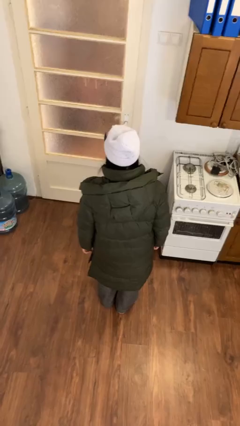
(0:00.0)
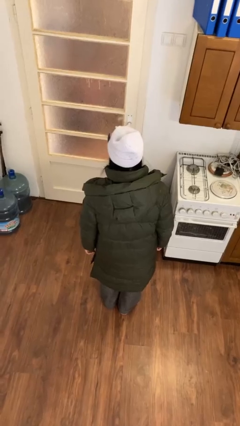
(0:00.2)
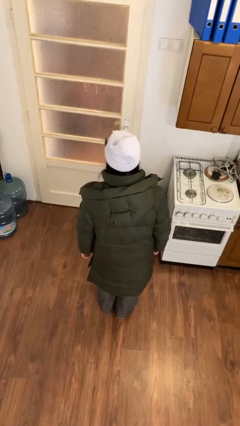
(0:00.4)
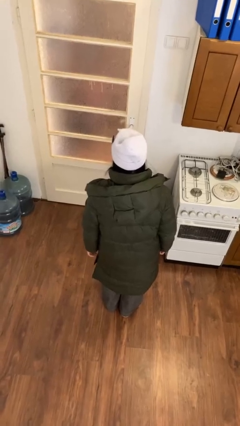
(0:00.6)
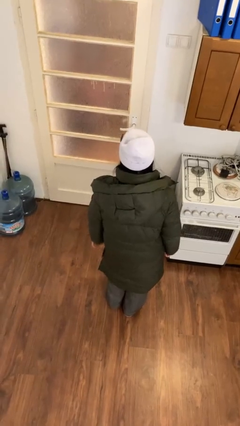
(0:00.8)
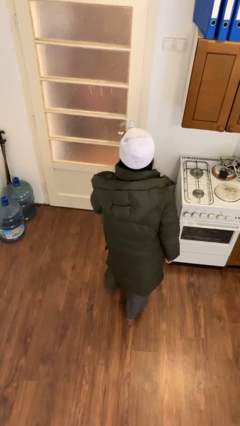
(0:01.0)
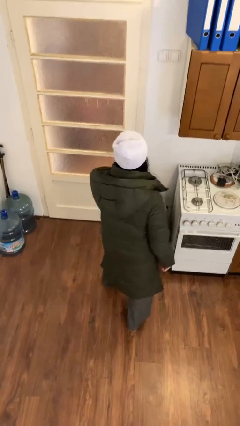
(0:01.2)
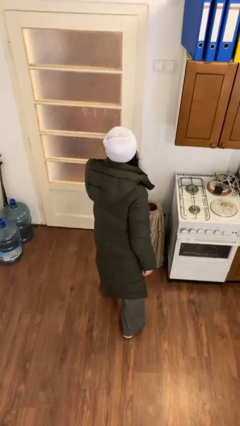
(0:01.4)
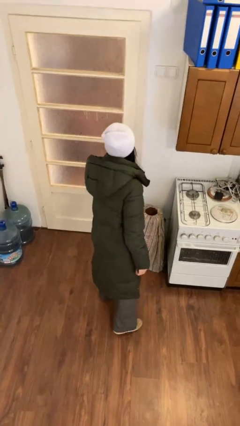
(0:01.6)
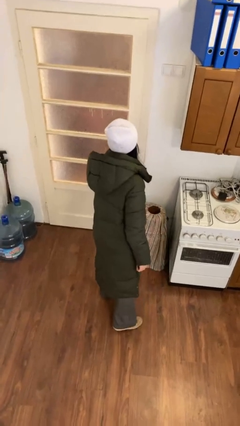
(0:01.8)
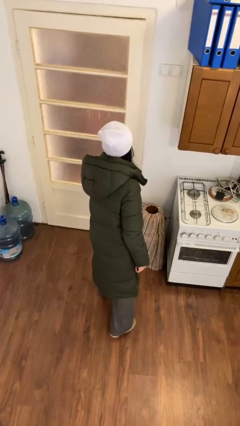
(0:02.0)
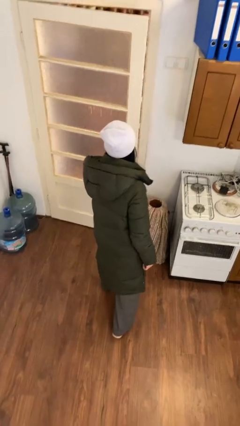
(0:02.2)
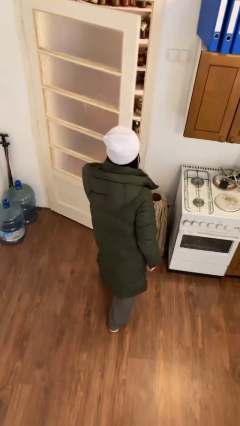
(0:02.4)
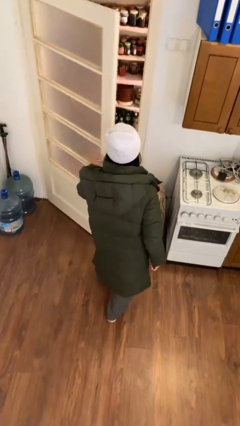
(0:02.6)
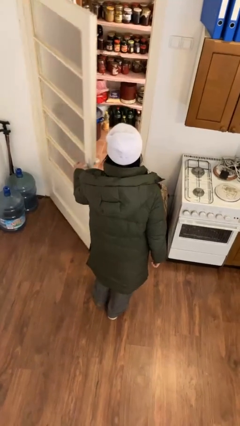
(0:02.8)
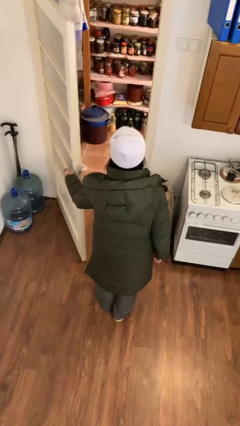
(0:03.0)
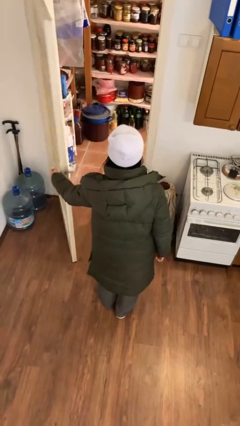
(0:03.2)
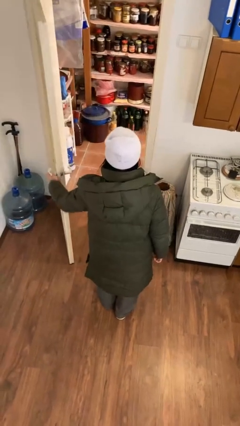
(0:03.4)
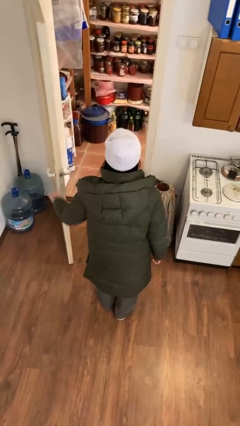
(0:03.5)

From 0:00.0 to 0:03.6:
person opens facility door

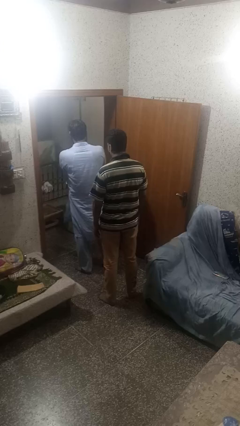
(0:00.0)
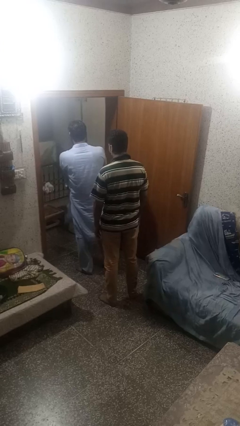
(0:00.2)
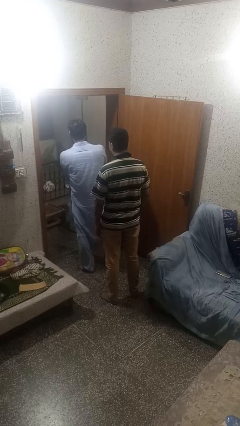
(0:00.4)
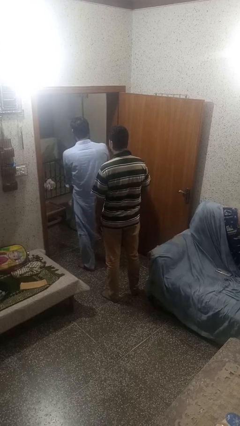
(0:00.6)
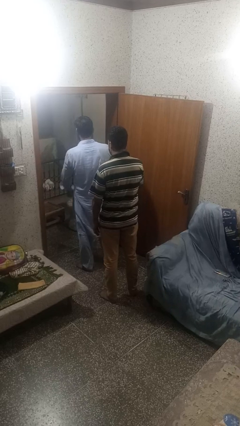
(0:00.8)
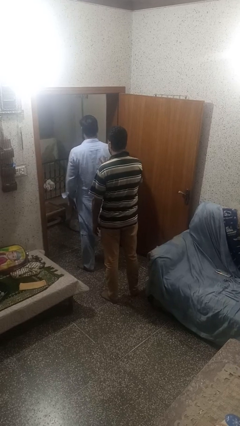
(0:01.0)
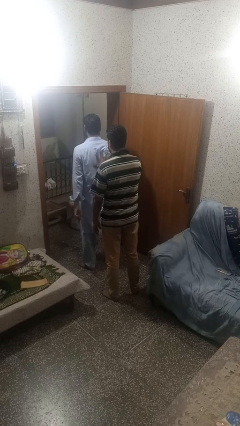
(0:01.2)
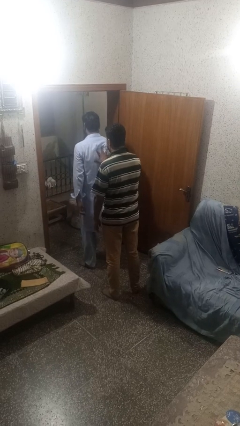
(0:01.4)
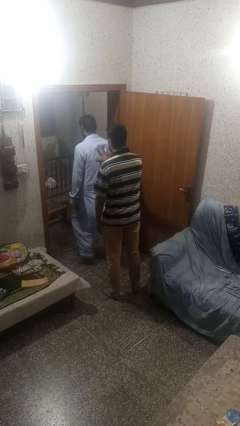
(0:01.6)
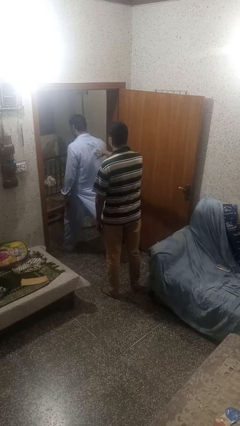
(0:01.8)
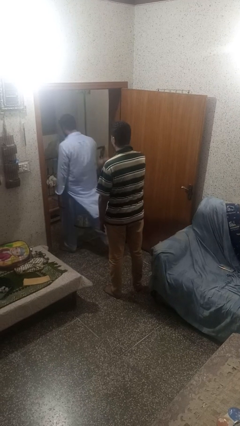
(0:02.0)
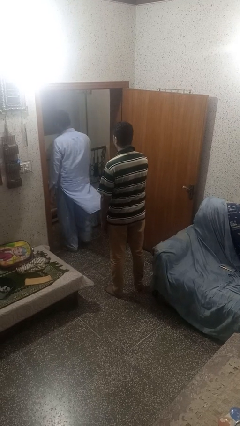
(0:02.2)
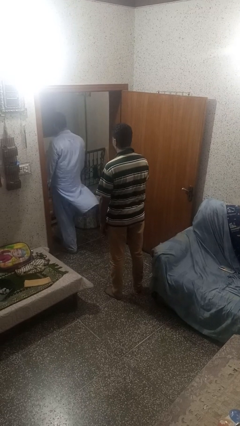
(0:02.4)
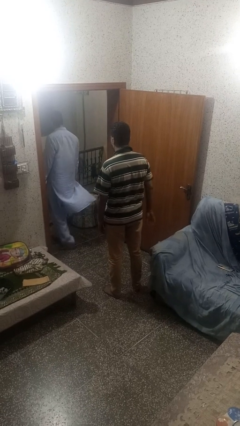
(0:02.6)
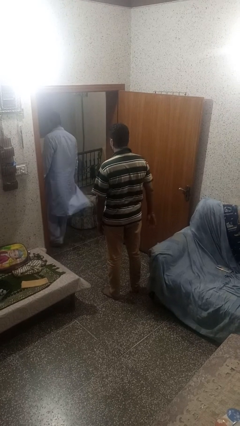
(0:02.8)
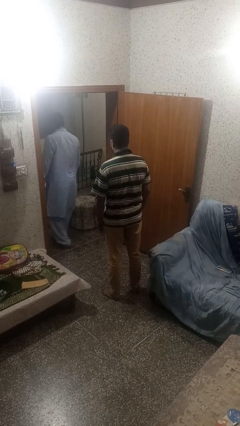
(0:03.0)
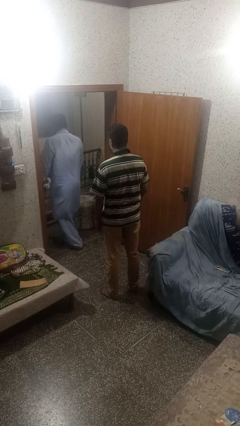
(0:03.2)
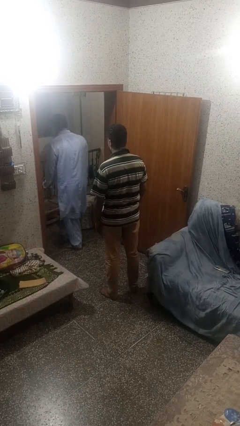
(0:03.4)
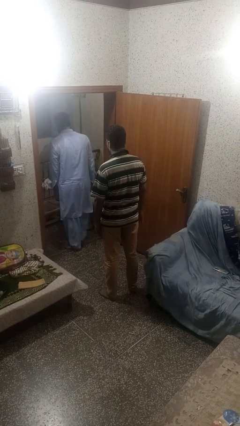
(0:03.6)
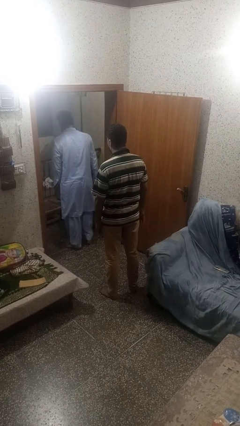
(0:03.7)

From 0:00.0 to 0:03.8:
person shoves person

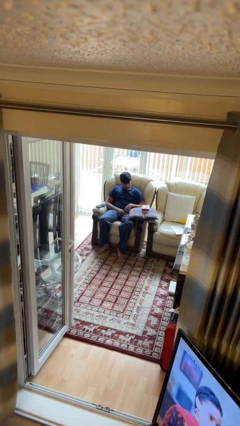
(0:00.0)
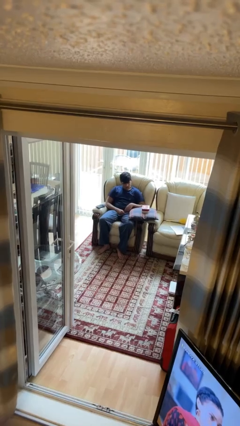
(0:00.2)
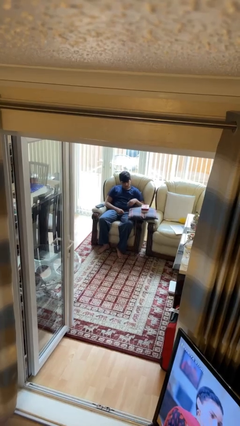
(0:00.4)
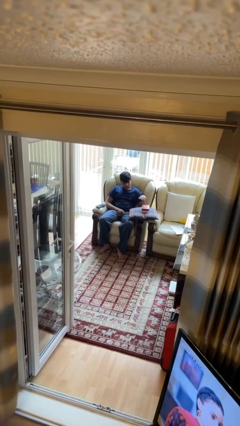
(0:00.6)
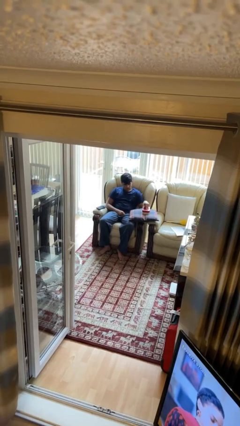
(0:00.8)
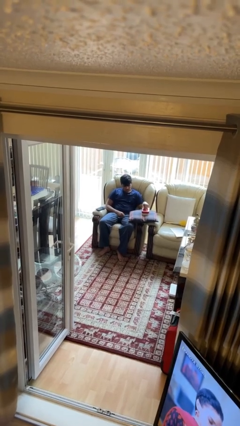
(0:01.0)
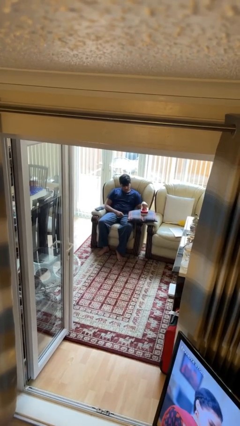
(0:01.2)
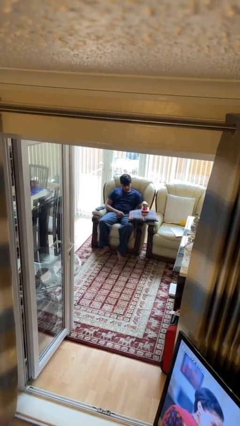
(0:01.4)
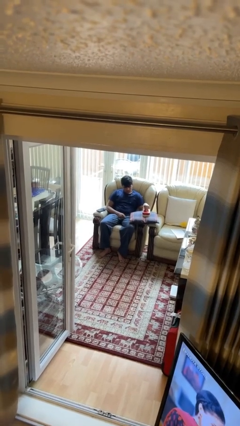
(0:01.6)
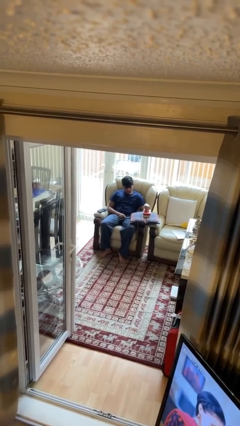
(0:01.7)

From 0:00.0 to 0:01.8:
person taps object with finger

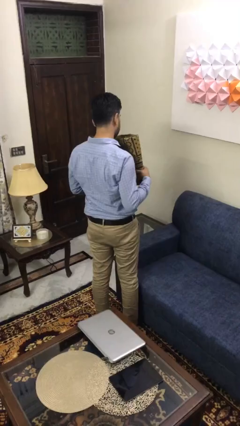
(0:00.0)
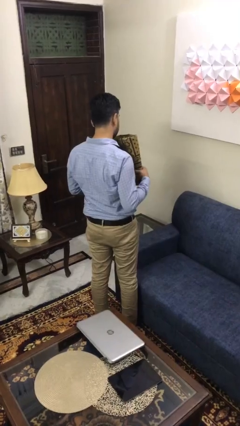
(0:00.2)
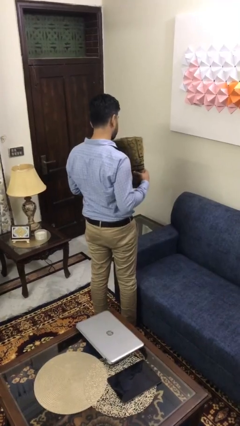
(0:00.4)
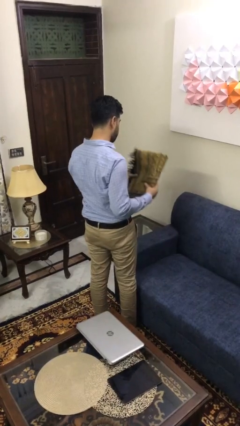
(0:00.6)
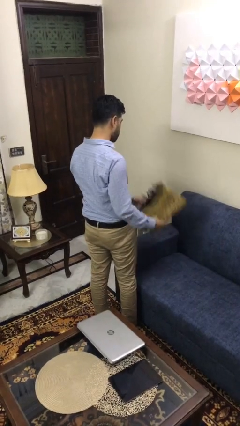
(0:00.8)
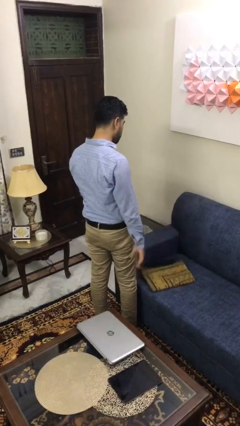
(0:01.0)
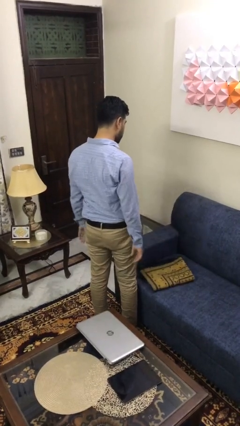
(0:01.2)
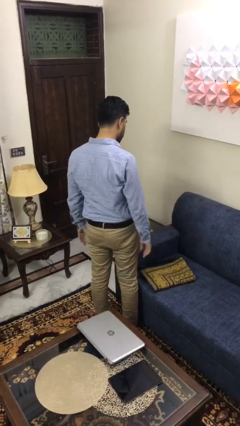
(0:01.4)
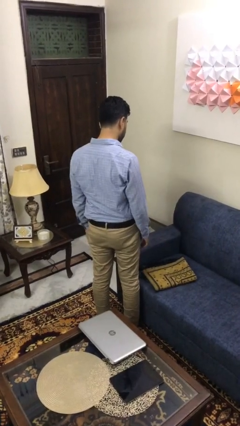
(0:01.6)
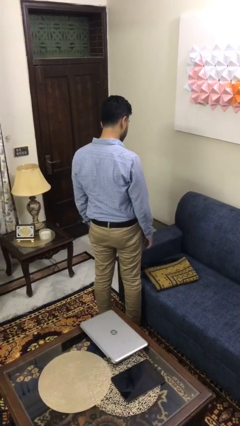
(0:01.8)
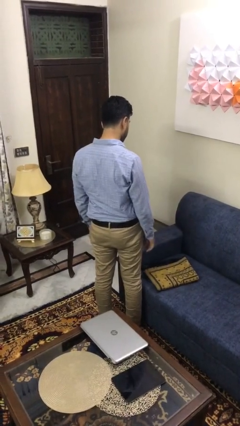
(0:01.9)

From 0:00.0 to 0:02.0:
person puts down object on couch

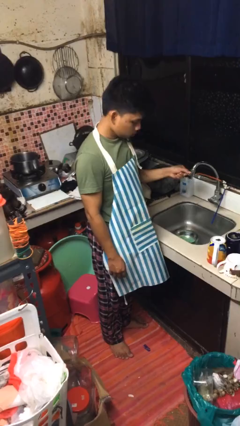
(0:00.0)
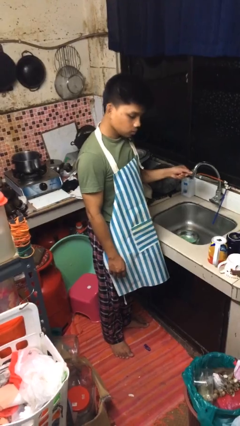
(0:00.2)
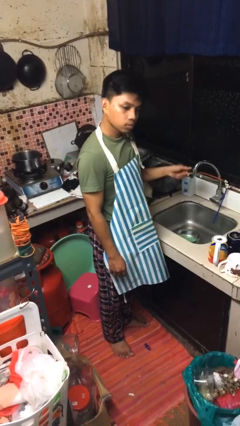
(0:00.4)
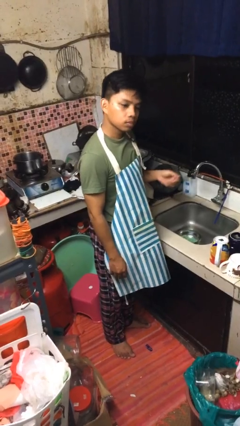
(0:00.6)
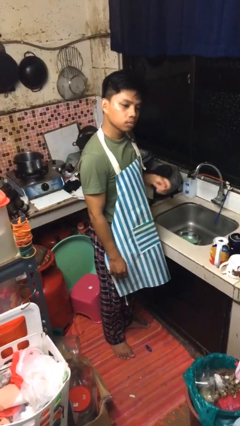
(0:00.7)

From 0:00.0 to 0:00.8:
person turns off faucet

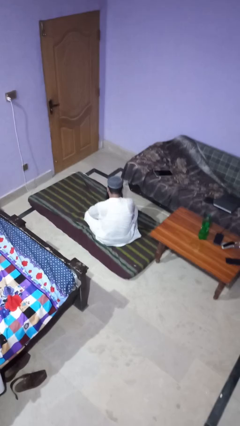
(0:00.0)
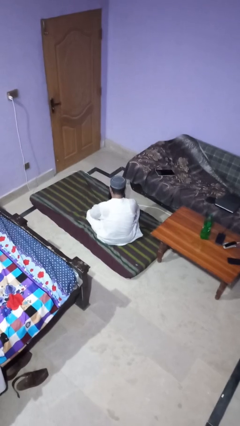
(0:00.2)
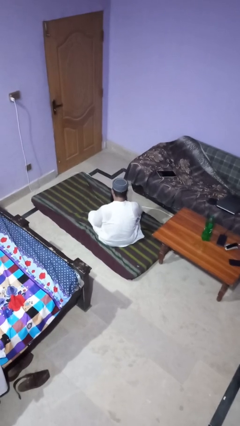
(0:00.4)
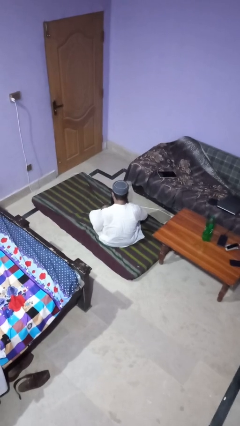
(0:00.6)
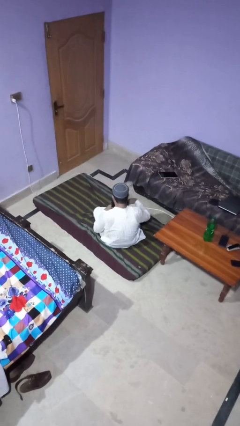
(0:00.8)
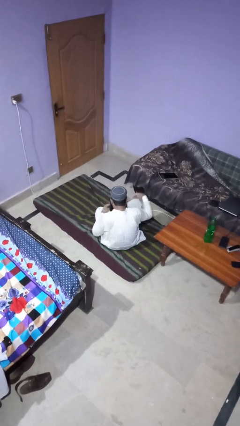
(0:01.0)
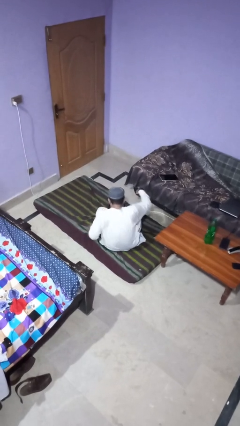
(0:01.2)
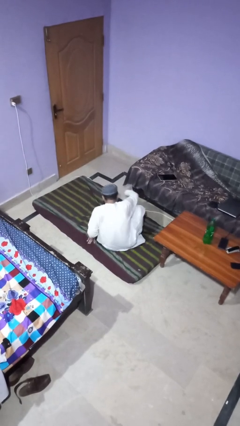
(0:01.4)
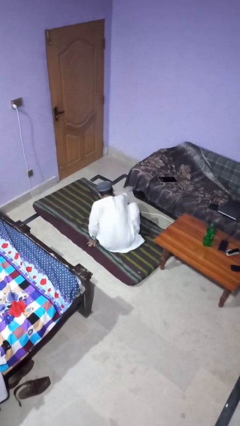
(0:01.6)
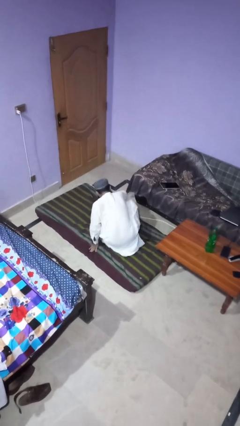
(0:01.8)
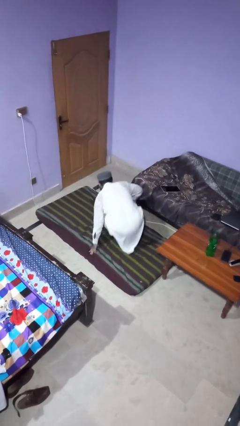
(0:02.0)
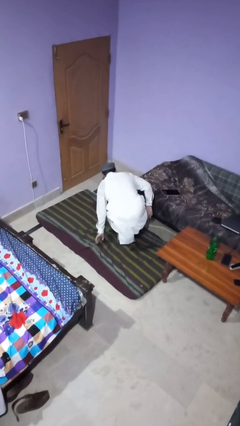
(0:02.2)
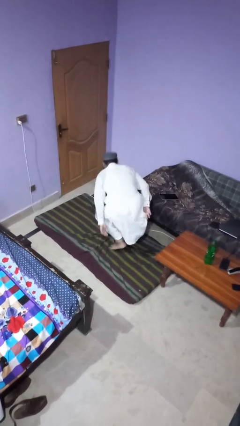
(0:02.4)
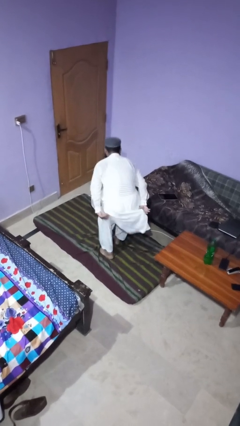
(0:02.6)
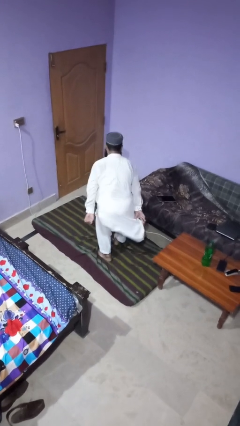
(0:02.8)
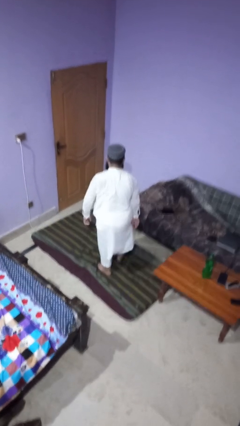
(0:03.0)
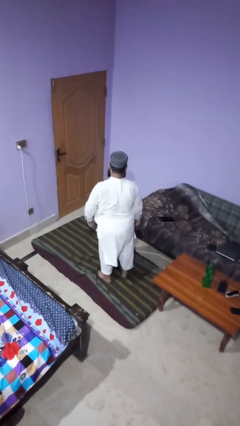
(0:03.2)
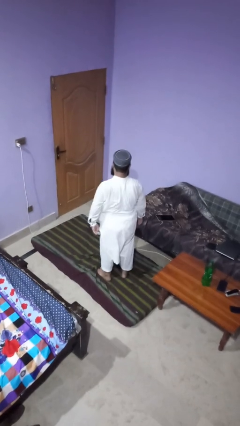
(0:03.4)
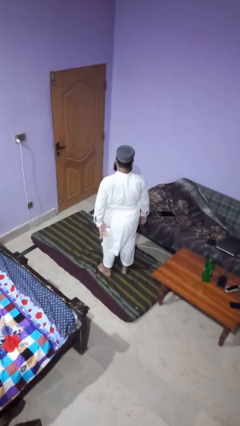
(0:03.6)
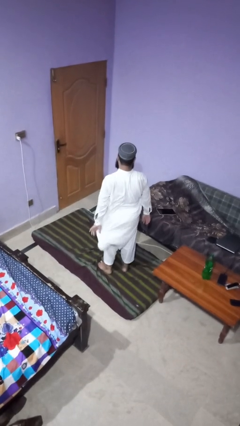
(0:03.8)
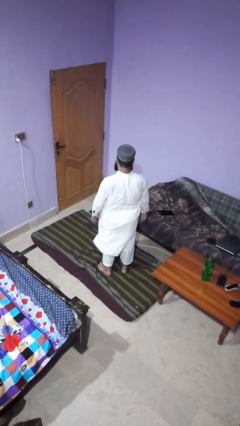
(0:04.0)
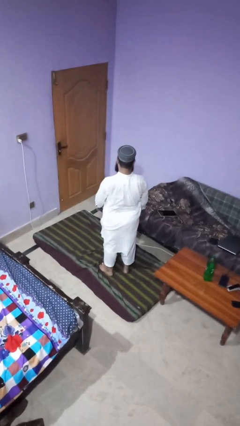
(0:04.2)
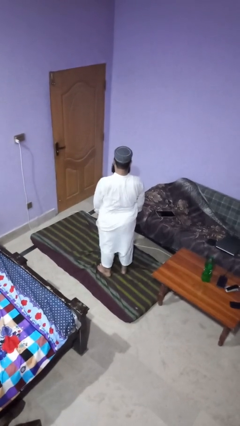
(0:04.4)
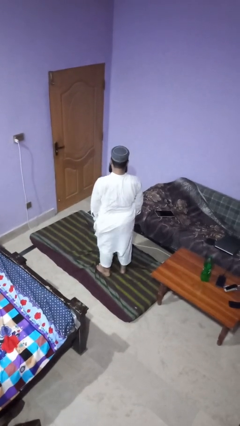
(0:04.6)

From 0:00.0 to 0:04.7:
person stands up from floor

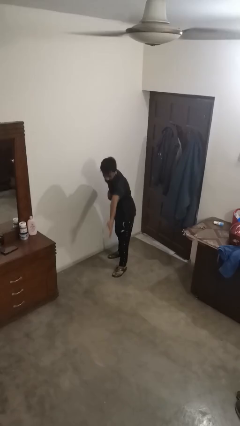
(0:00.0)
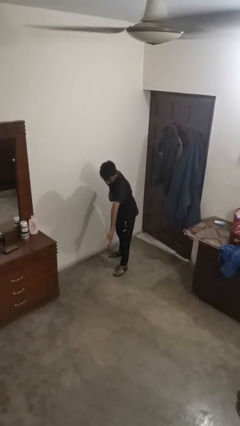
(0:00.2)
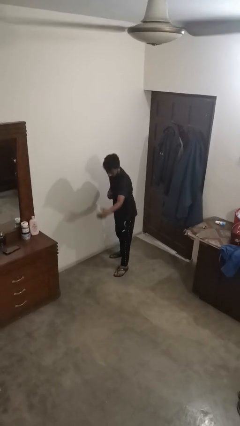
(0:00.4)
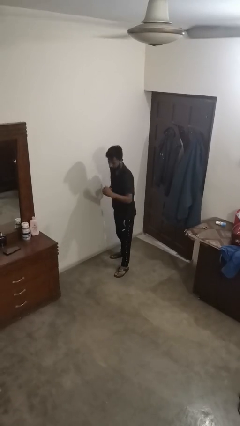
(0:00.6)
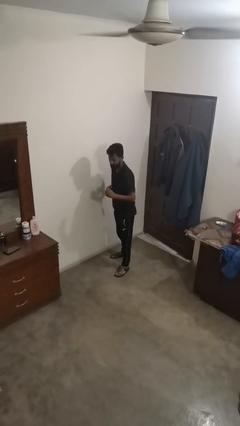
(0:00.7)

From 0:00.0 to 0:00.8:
person karate chop
